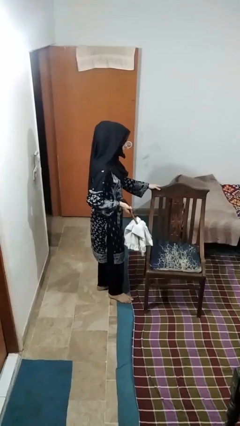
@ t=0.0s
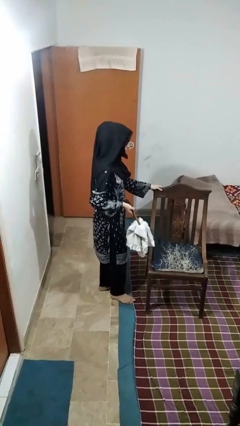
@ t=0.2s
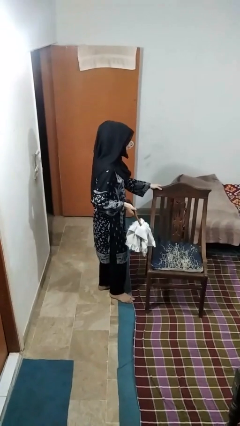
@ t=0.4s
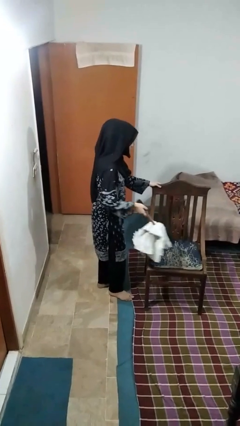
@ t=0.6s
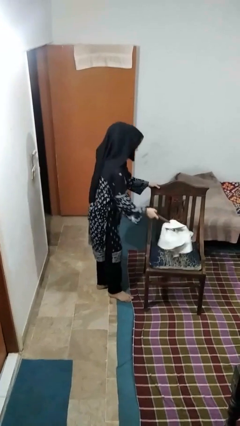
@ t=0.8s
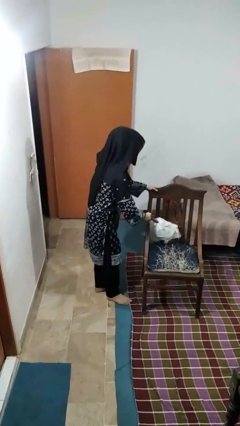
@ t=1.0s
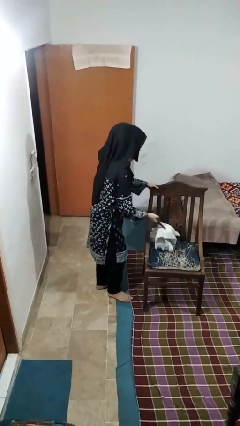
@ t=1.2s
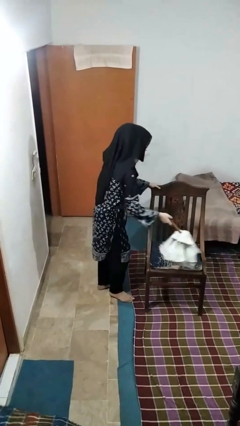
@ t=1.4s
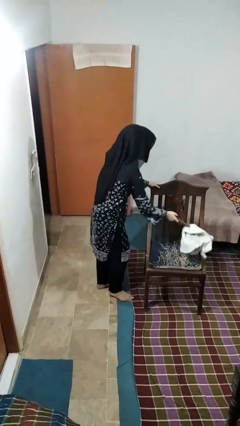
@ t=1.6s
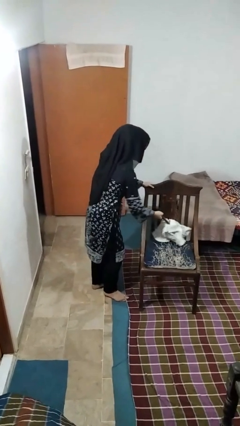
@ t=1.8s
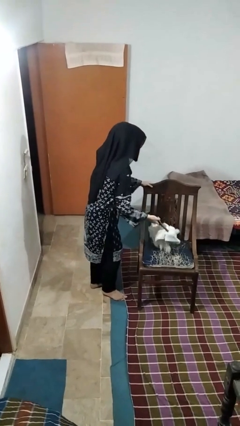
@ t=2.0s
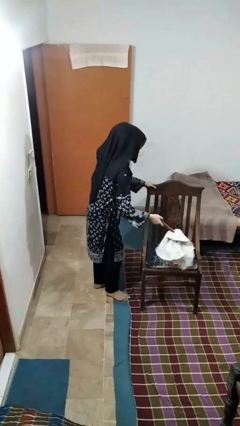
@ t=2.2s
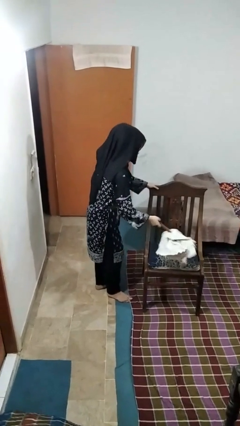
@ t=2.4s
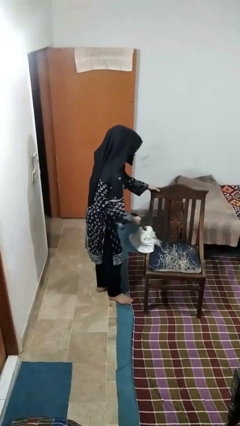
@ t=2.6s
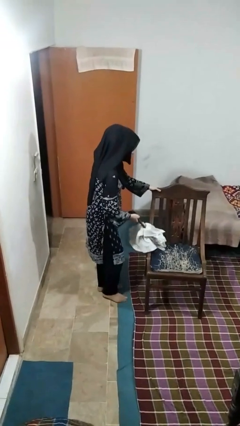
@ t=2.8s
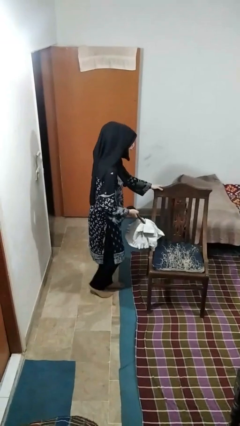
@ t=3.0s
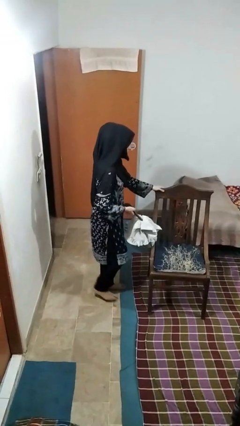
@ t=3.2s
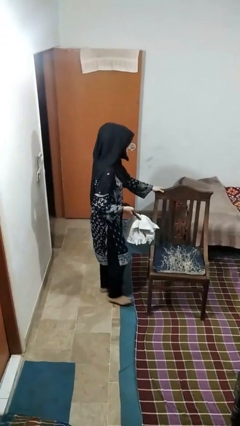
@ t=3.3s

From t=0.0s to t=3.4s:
person dusts furniture

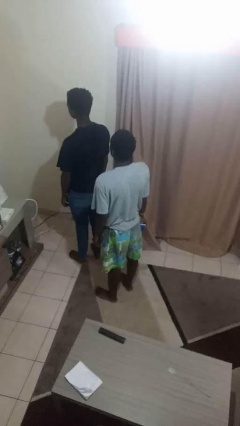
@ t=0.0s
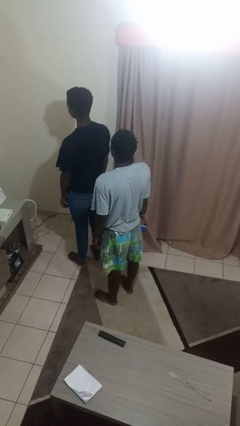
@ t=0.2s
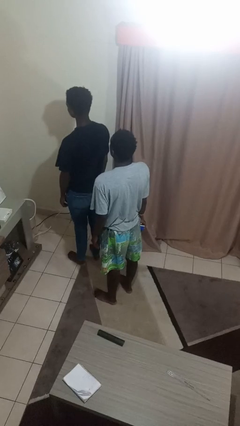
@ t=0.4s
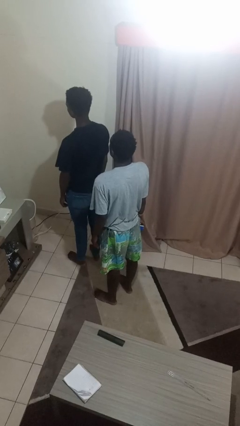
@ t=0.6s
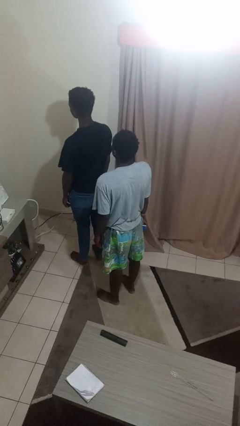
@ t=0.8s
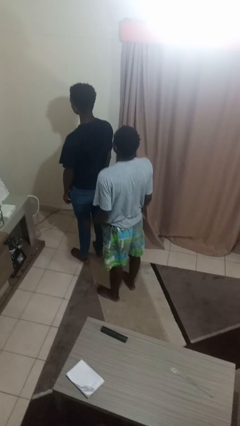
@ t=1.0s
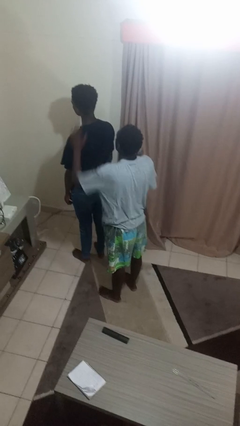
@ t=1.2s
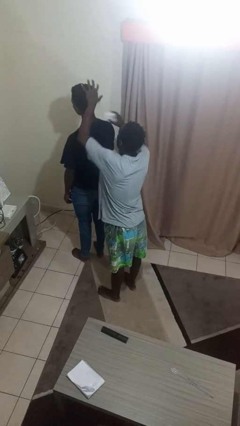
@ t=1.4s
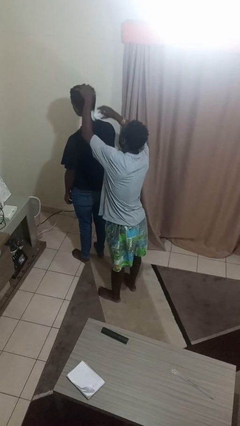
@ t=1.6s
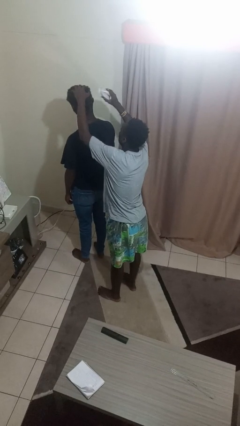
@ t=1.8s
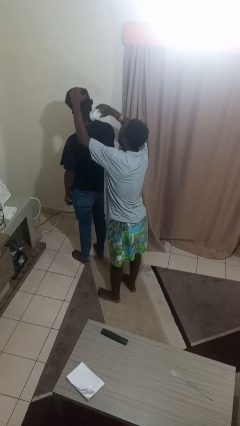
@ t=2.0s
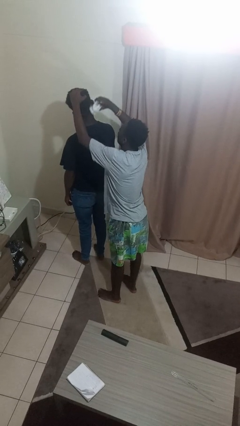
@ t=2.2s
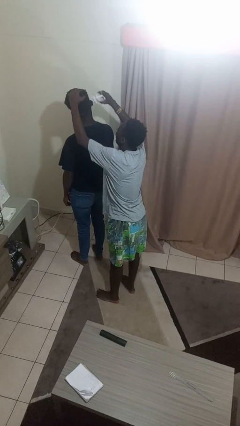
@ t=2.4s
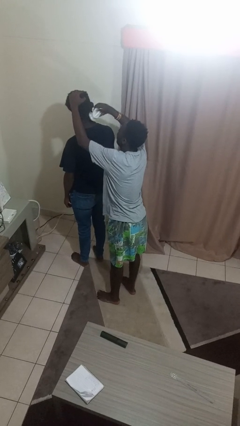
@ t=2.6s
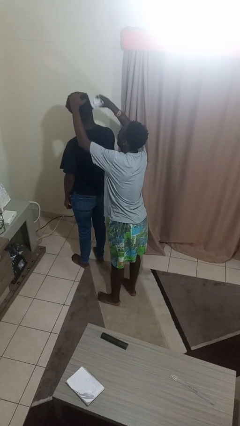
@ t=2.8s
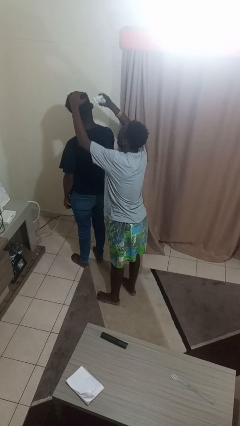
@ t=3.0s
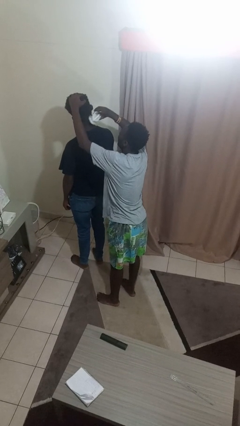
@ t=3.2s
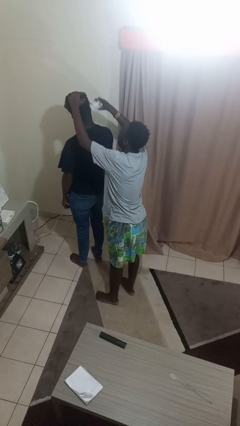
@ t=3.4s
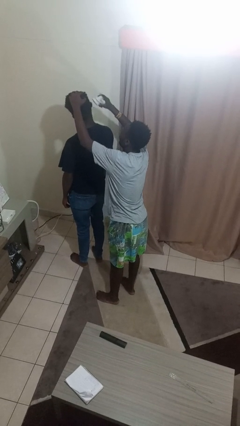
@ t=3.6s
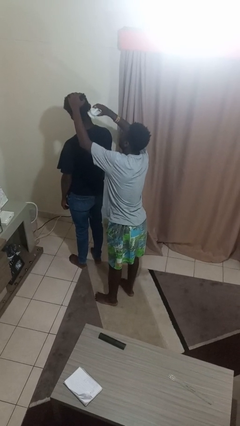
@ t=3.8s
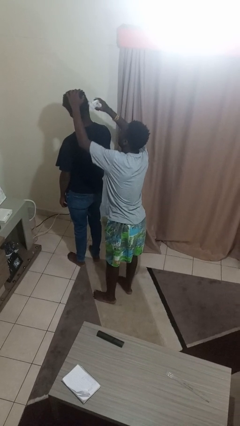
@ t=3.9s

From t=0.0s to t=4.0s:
person brushes hair of person

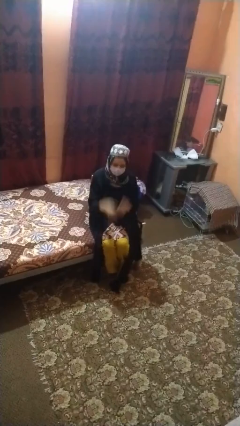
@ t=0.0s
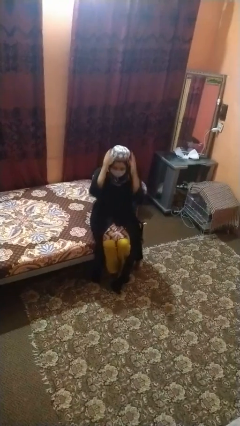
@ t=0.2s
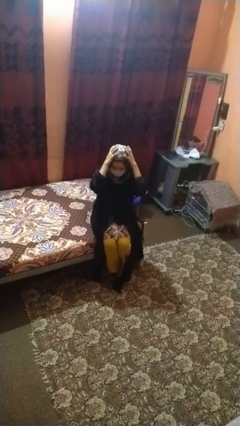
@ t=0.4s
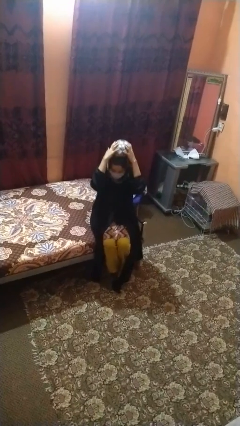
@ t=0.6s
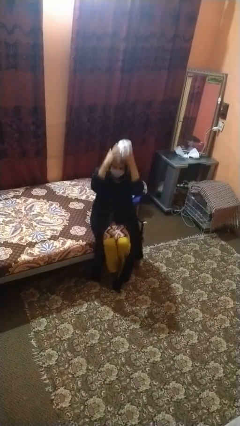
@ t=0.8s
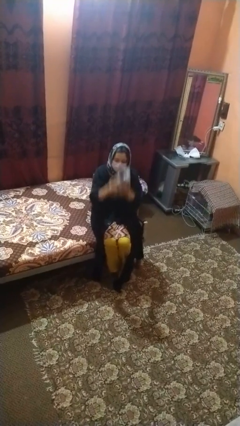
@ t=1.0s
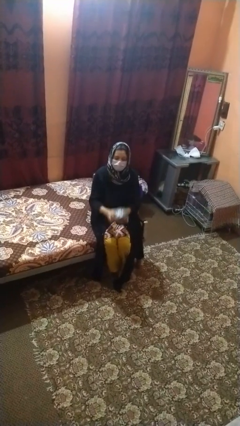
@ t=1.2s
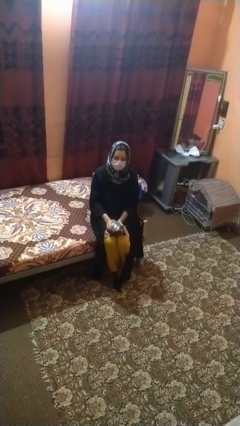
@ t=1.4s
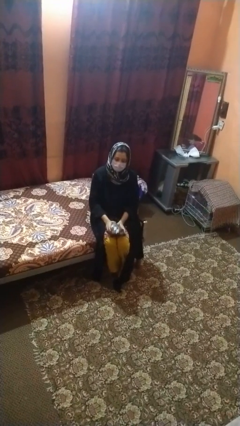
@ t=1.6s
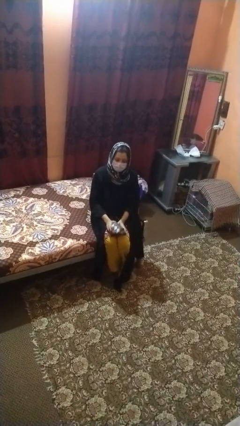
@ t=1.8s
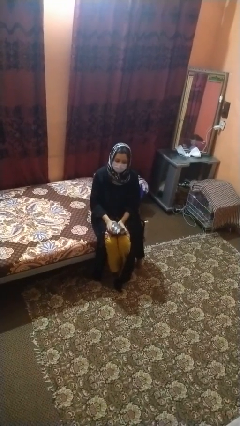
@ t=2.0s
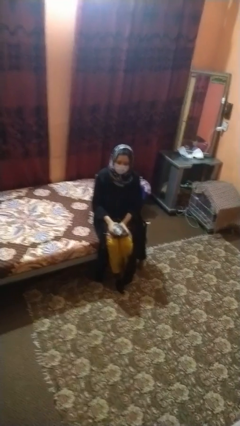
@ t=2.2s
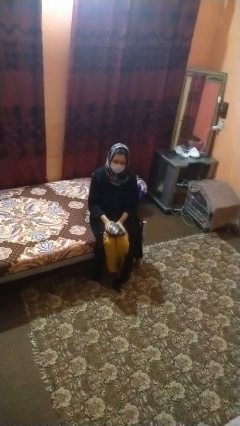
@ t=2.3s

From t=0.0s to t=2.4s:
person takes off hat

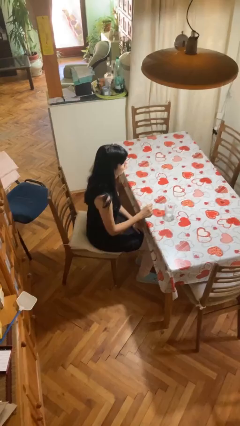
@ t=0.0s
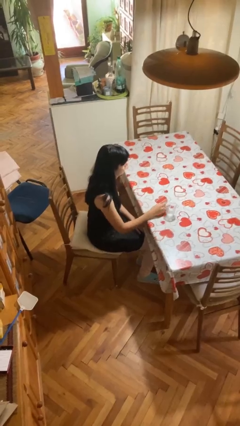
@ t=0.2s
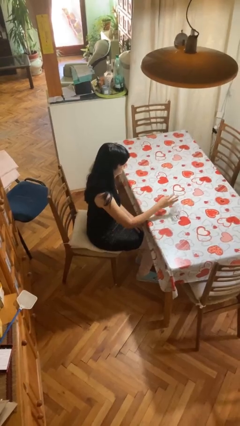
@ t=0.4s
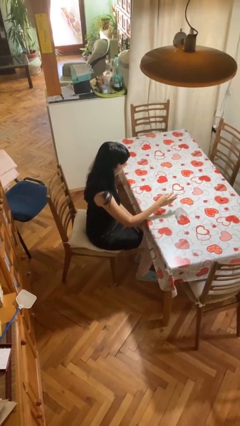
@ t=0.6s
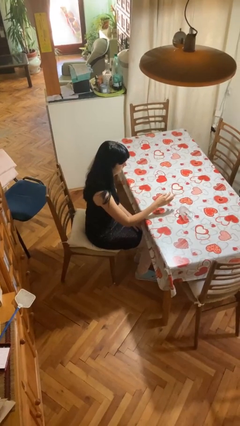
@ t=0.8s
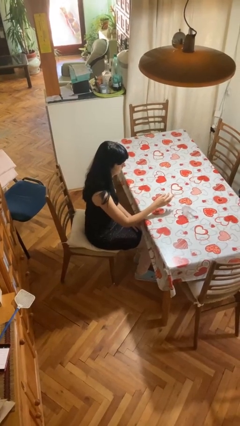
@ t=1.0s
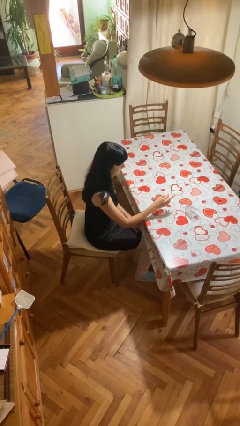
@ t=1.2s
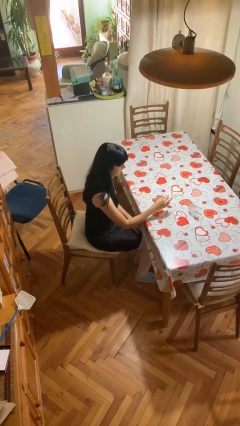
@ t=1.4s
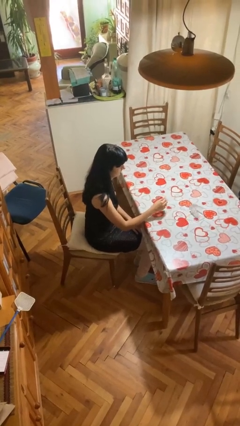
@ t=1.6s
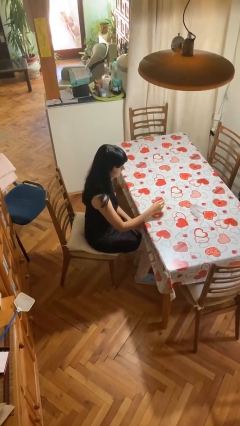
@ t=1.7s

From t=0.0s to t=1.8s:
person knocks over glass

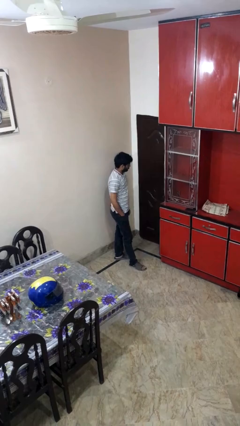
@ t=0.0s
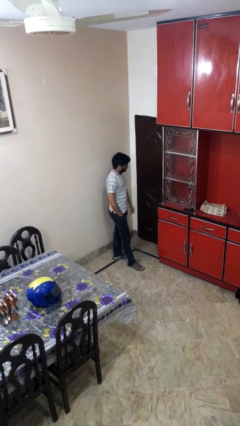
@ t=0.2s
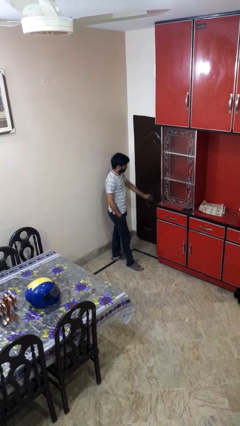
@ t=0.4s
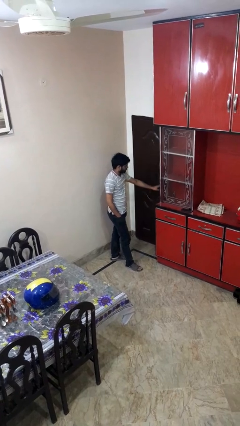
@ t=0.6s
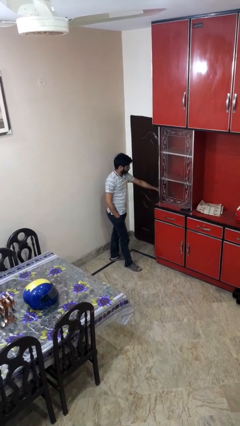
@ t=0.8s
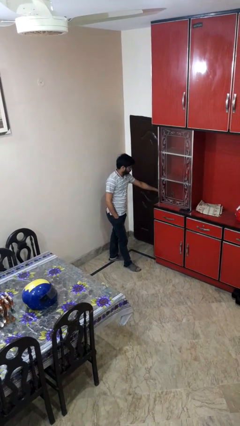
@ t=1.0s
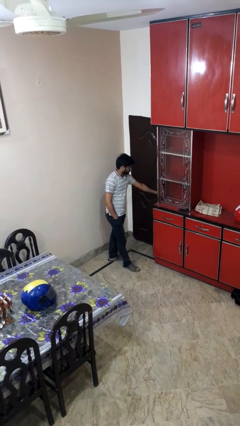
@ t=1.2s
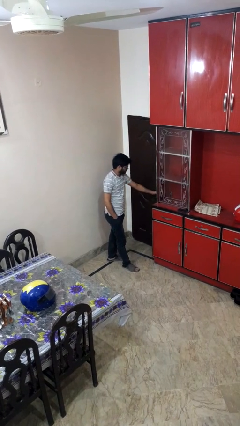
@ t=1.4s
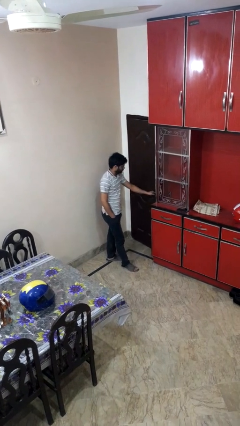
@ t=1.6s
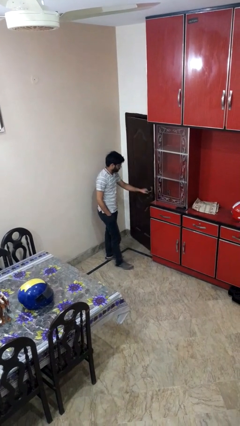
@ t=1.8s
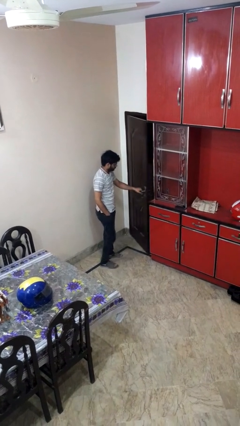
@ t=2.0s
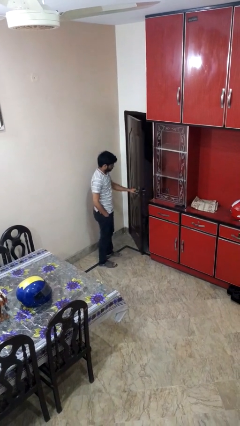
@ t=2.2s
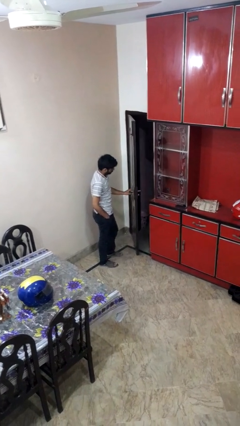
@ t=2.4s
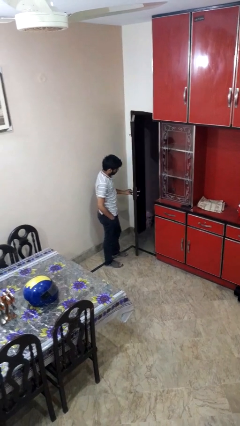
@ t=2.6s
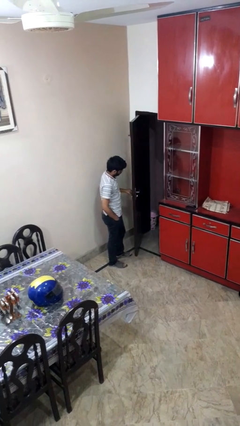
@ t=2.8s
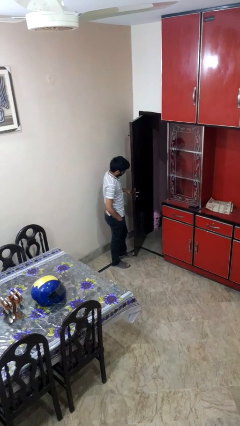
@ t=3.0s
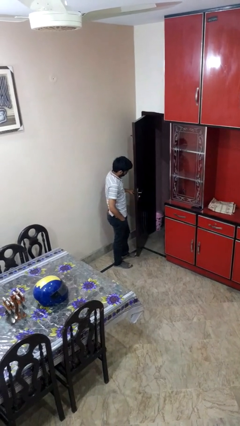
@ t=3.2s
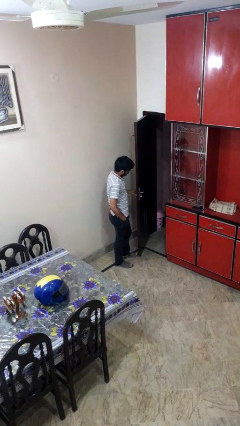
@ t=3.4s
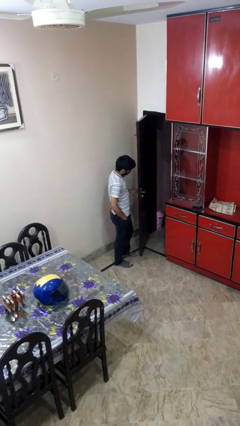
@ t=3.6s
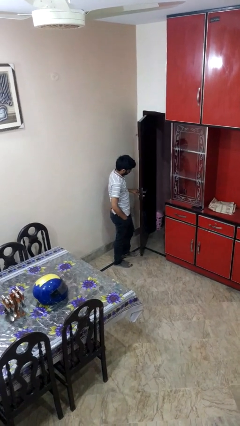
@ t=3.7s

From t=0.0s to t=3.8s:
person opens facility door

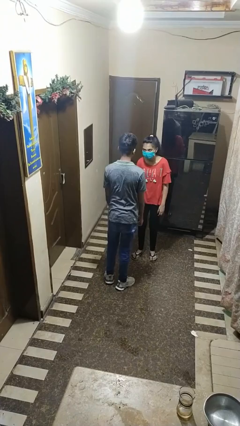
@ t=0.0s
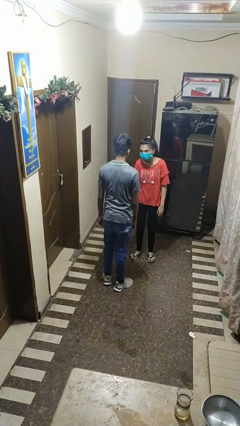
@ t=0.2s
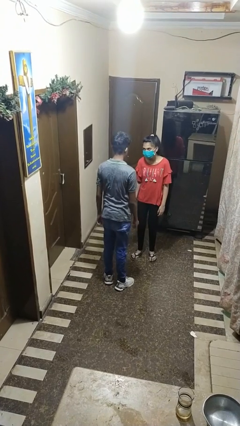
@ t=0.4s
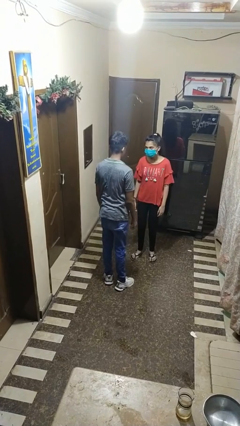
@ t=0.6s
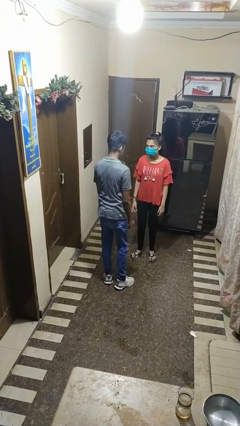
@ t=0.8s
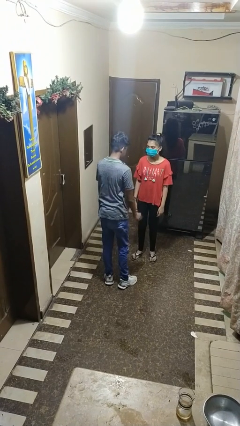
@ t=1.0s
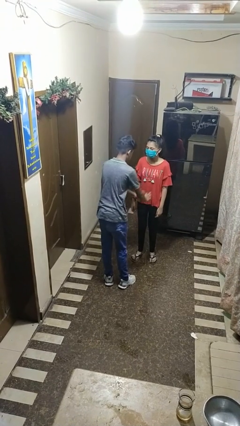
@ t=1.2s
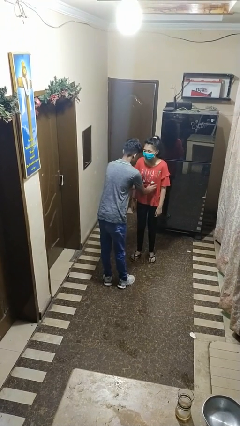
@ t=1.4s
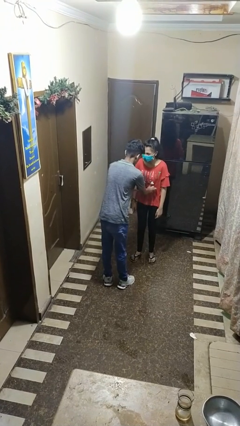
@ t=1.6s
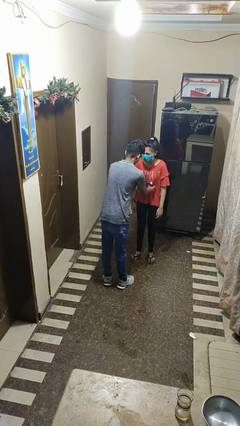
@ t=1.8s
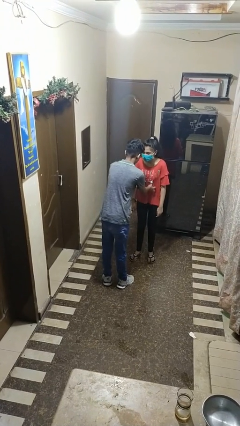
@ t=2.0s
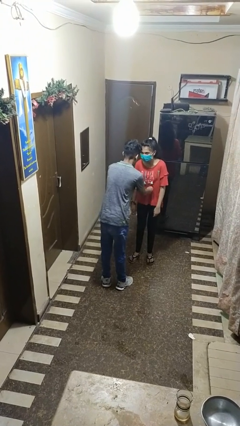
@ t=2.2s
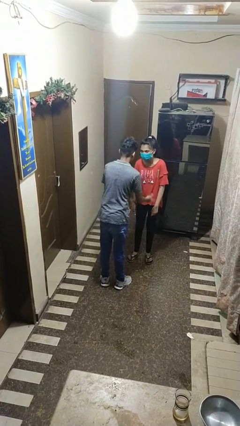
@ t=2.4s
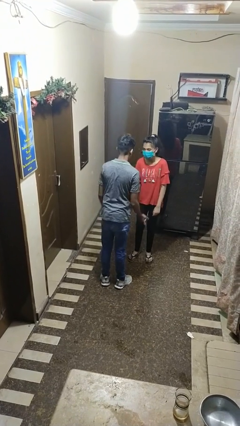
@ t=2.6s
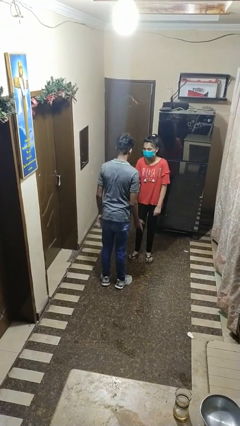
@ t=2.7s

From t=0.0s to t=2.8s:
person tickles person
